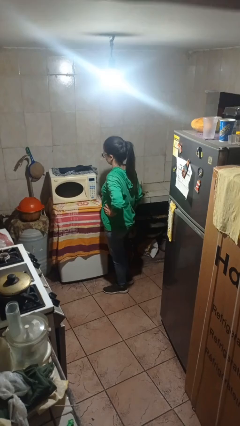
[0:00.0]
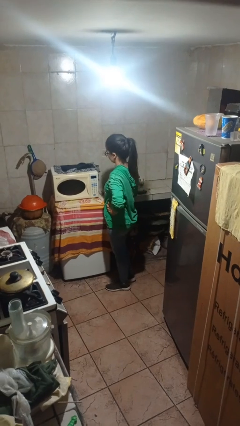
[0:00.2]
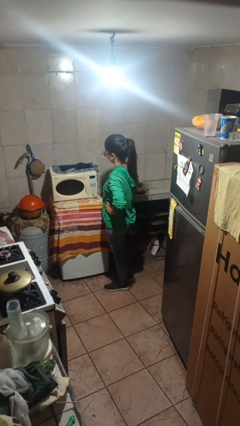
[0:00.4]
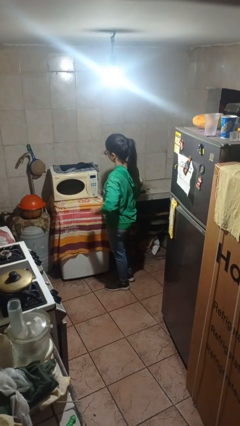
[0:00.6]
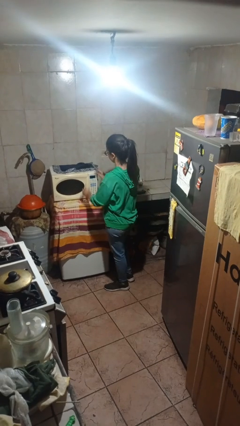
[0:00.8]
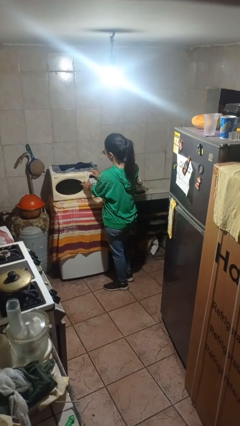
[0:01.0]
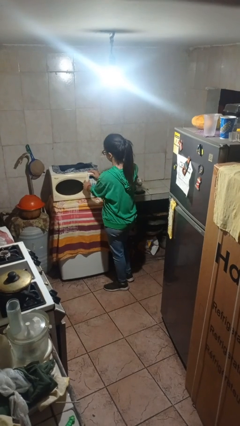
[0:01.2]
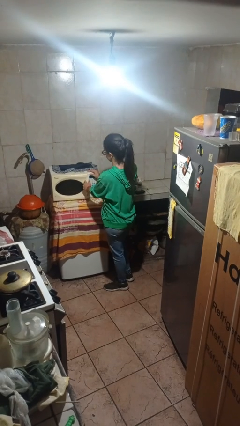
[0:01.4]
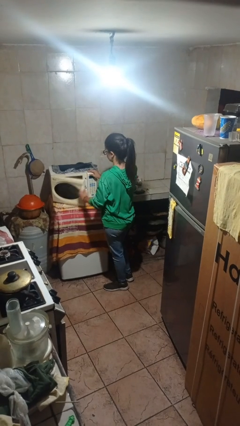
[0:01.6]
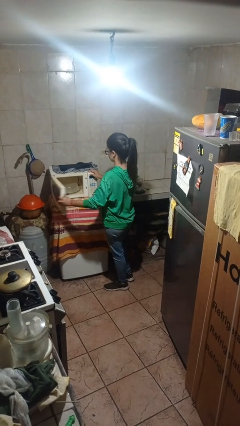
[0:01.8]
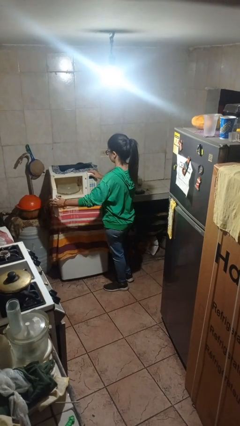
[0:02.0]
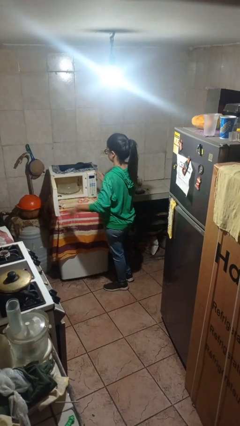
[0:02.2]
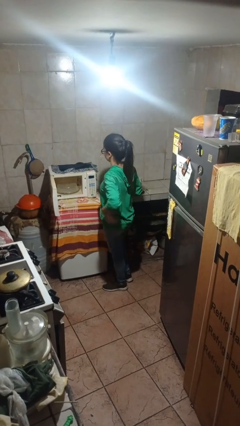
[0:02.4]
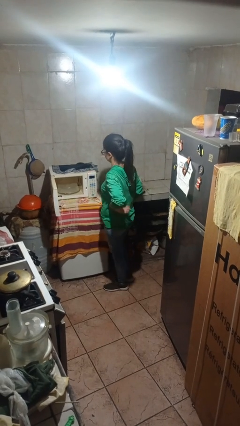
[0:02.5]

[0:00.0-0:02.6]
person opens microwave

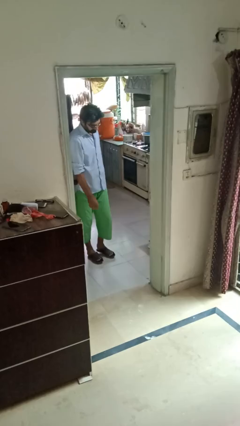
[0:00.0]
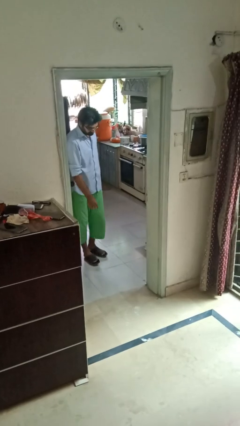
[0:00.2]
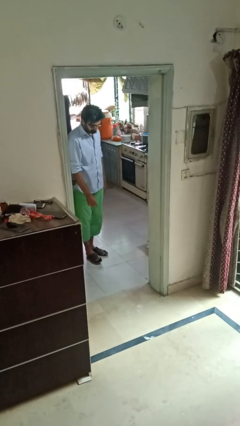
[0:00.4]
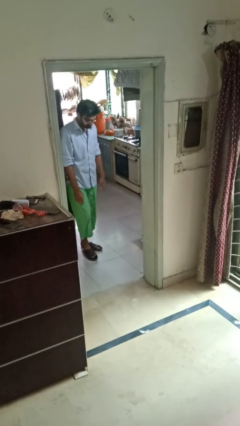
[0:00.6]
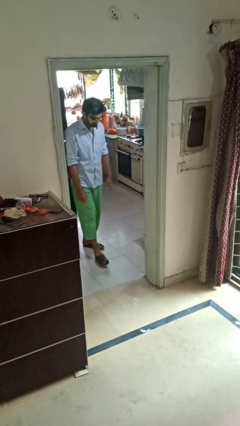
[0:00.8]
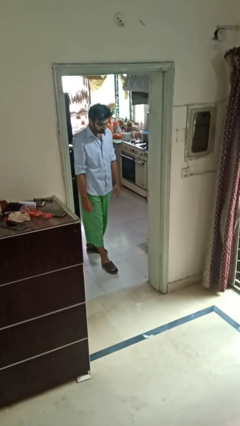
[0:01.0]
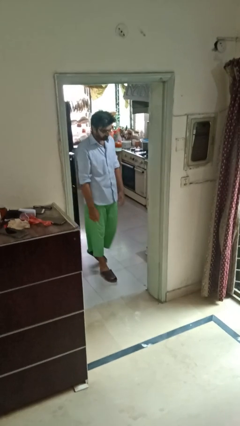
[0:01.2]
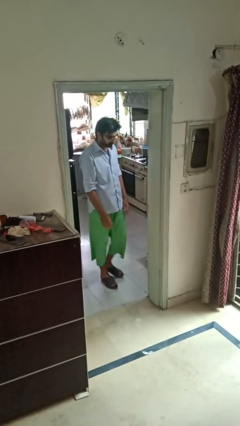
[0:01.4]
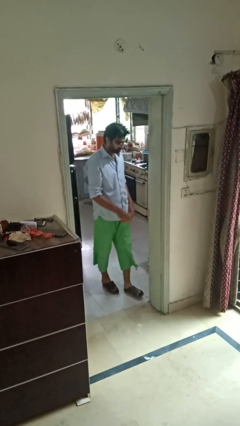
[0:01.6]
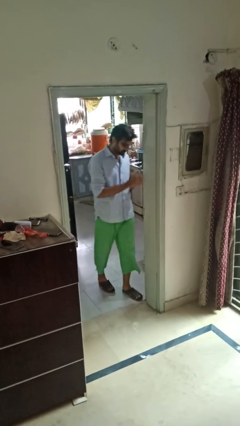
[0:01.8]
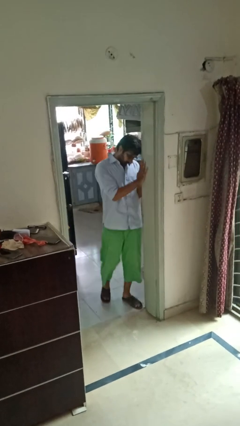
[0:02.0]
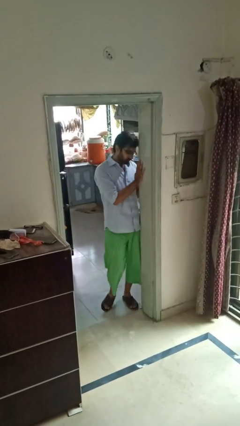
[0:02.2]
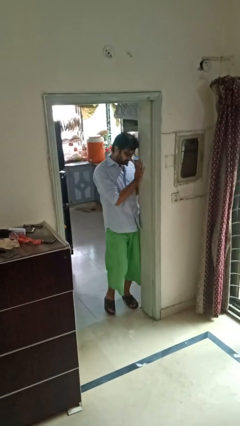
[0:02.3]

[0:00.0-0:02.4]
person bumps into wall

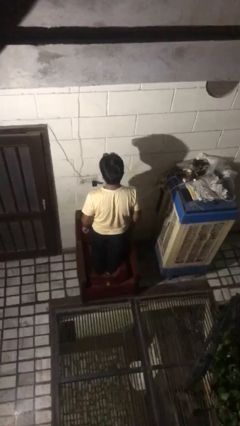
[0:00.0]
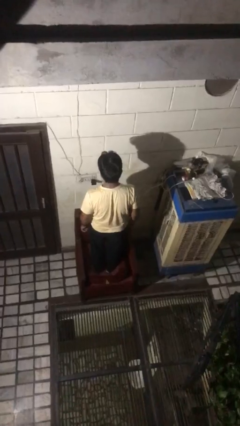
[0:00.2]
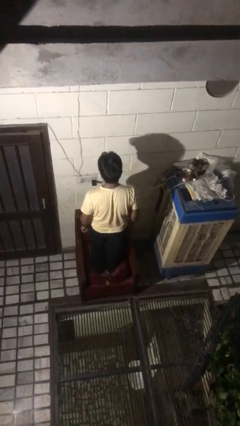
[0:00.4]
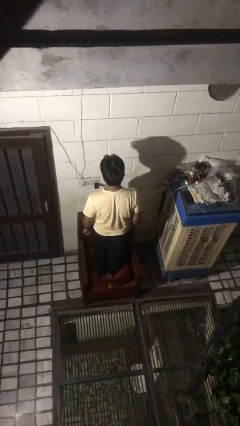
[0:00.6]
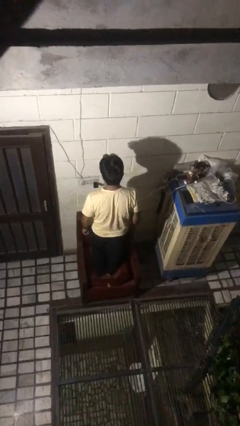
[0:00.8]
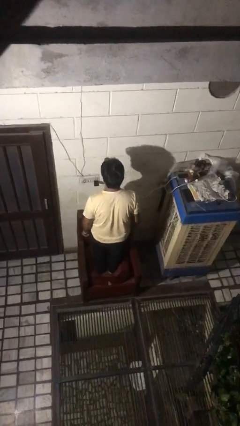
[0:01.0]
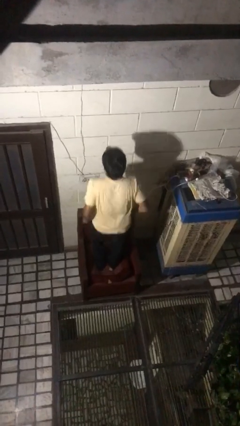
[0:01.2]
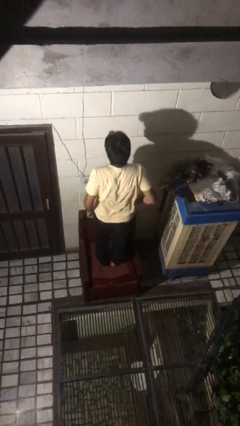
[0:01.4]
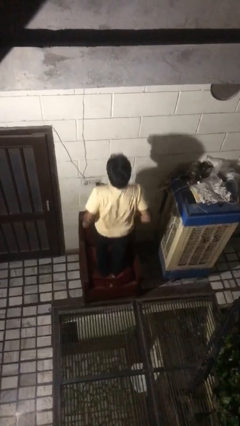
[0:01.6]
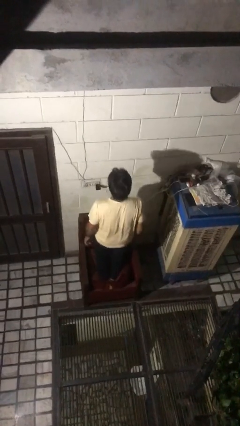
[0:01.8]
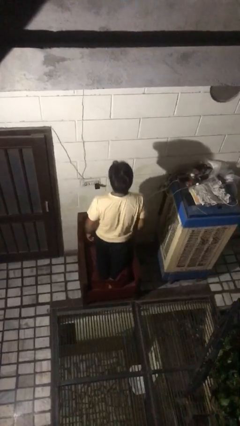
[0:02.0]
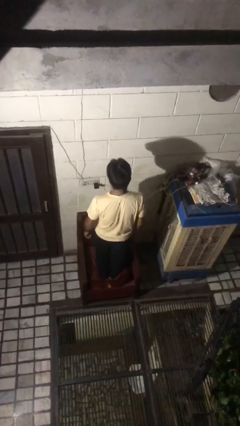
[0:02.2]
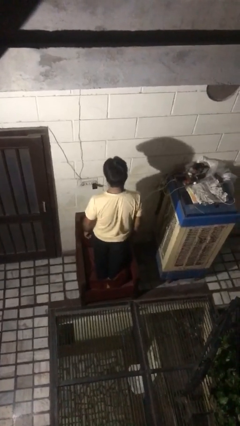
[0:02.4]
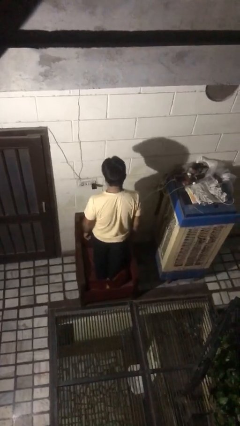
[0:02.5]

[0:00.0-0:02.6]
person jumps on couch

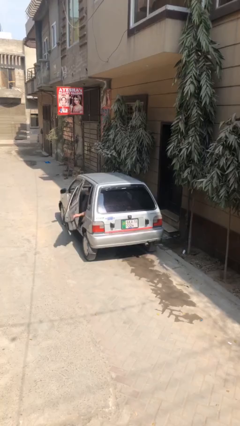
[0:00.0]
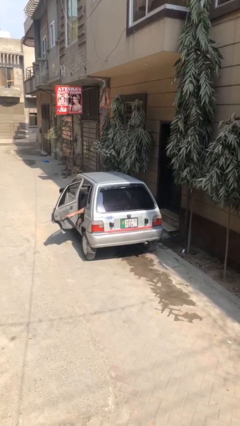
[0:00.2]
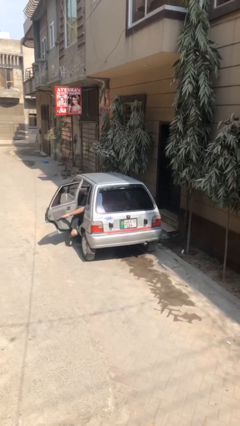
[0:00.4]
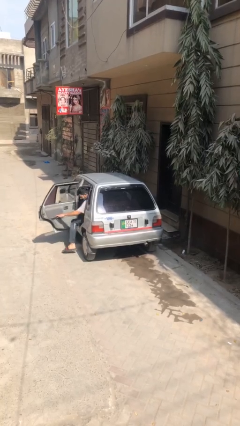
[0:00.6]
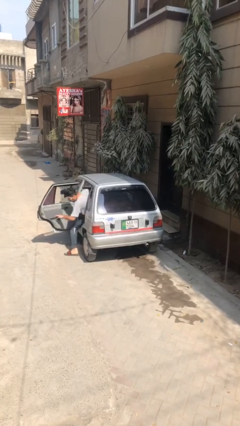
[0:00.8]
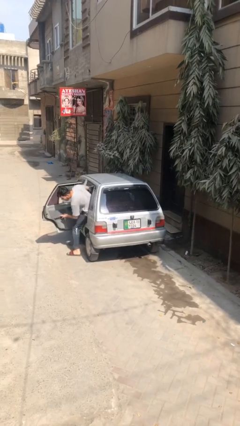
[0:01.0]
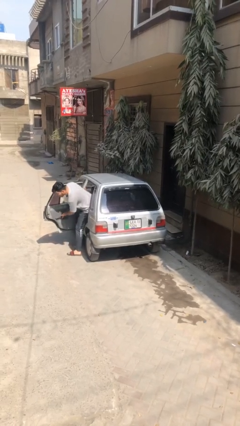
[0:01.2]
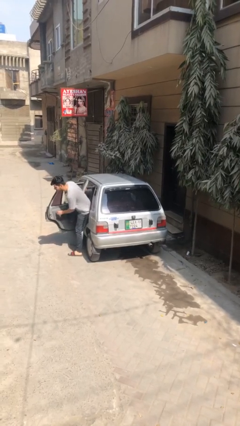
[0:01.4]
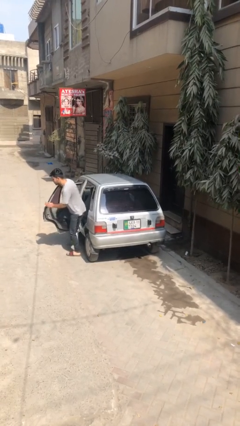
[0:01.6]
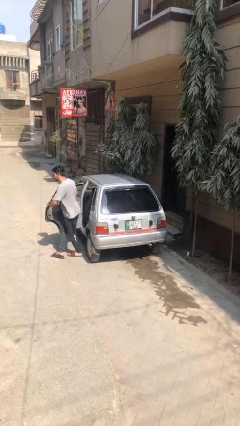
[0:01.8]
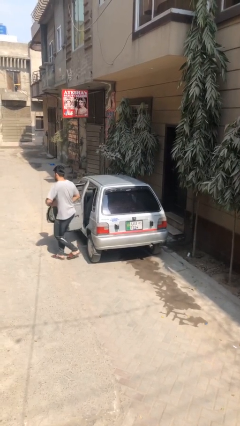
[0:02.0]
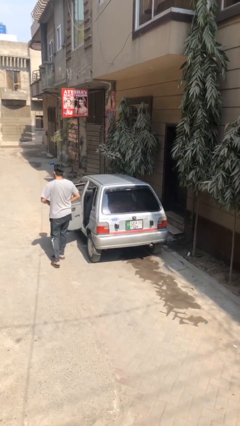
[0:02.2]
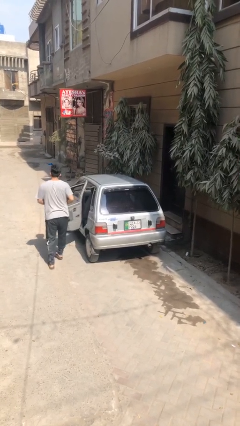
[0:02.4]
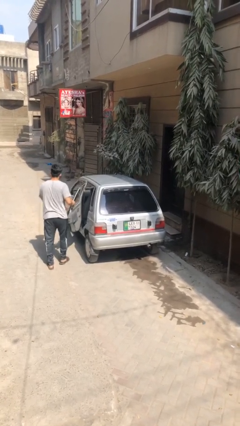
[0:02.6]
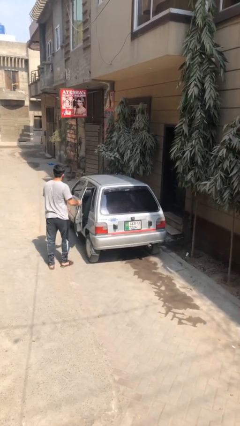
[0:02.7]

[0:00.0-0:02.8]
car drops off person

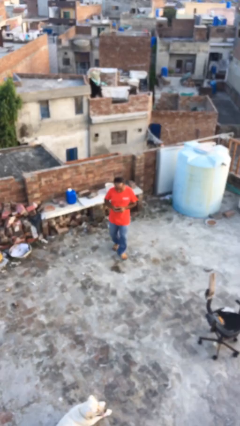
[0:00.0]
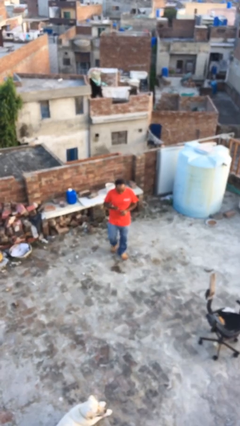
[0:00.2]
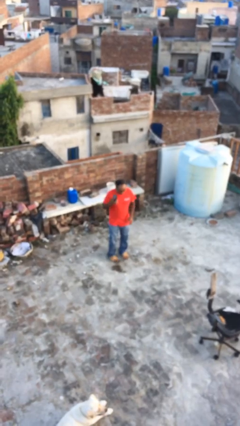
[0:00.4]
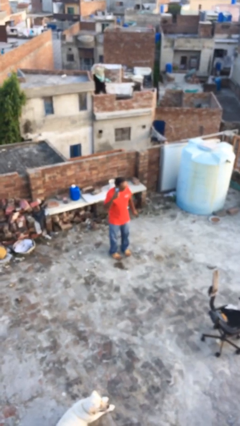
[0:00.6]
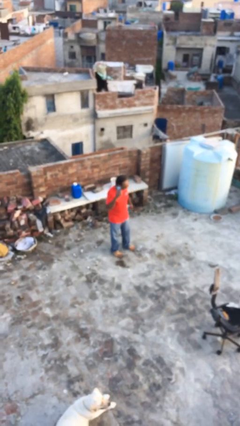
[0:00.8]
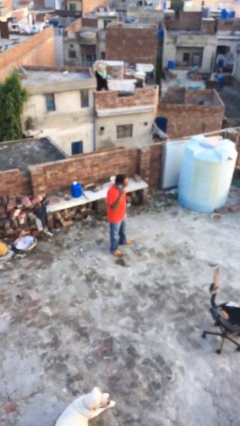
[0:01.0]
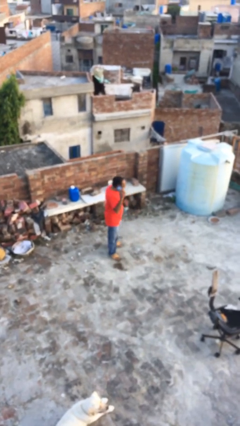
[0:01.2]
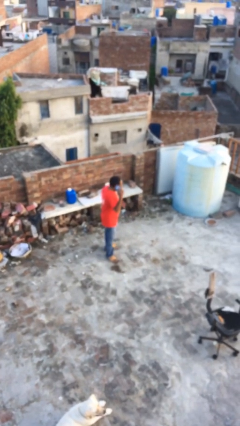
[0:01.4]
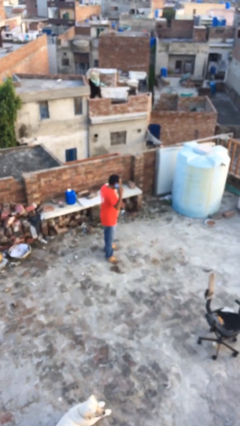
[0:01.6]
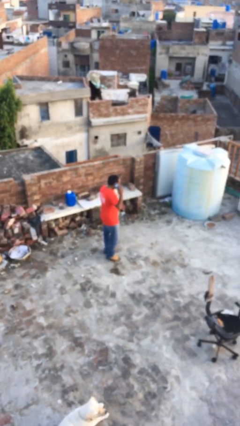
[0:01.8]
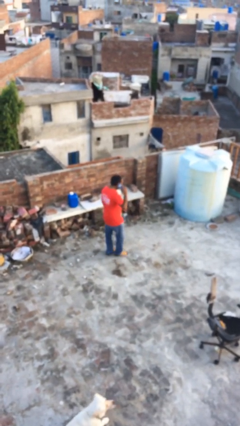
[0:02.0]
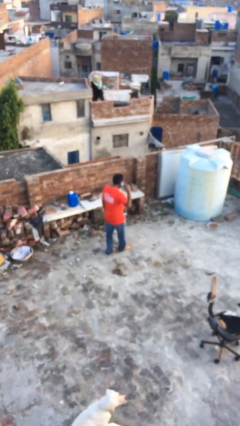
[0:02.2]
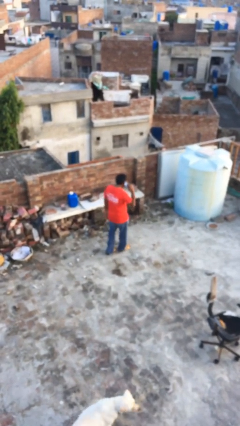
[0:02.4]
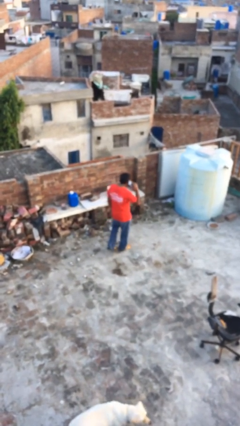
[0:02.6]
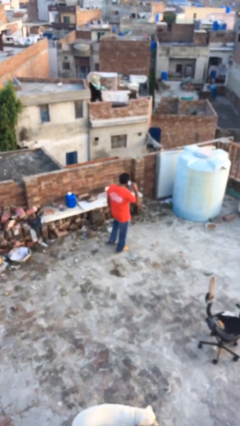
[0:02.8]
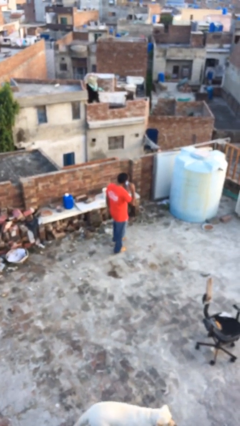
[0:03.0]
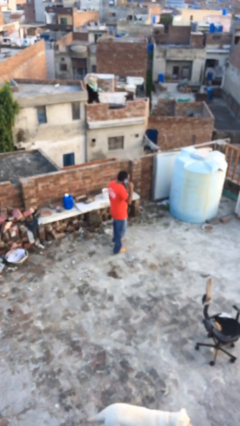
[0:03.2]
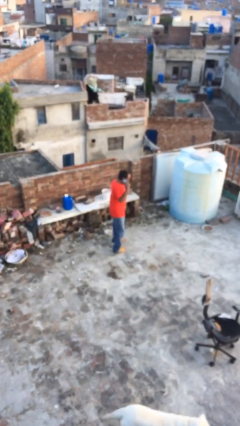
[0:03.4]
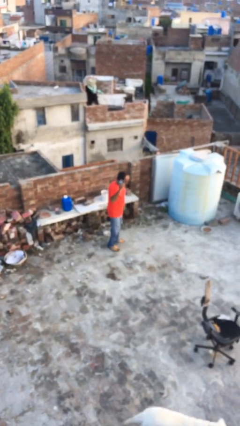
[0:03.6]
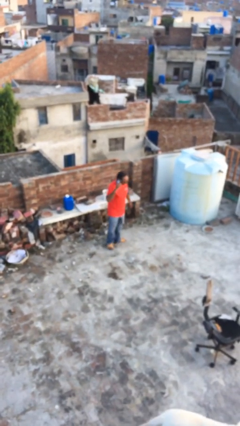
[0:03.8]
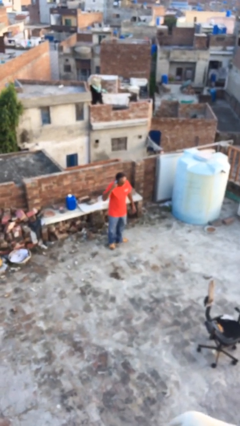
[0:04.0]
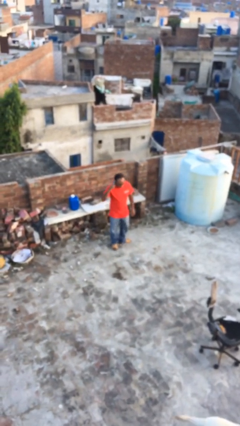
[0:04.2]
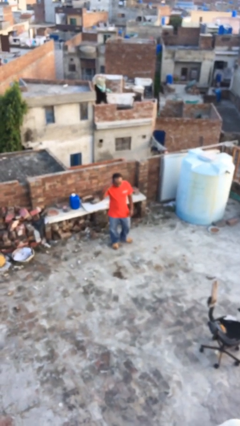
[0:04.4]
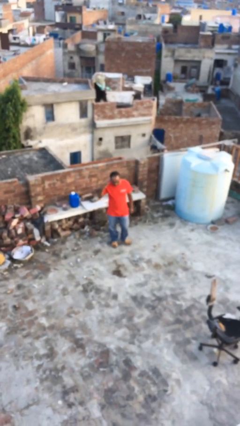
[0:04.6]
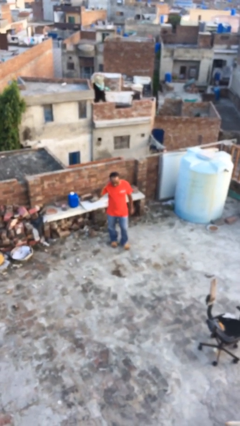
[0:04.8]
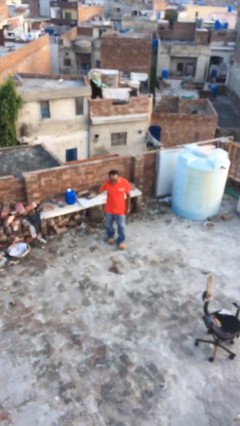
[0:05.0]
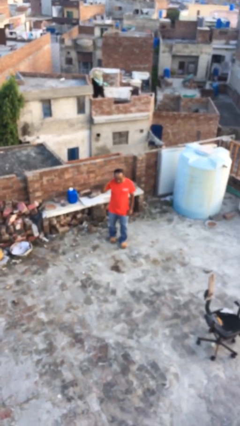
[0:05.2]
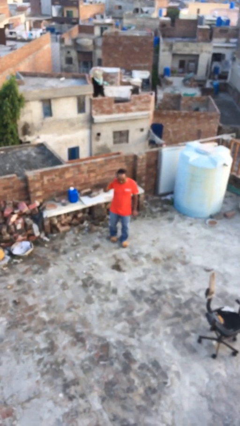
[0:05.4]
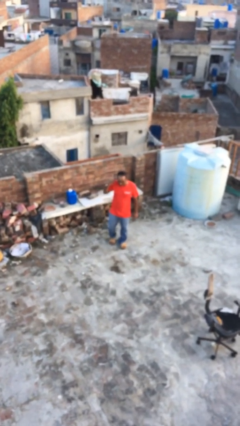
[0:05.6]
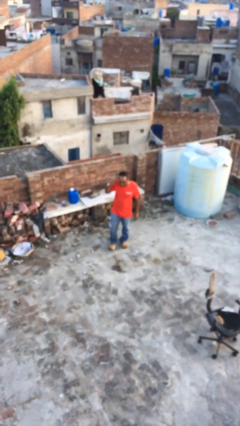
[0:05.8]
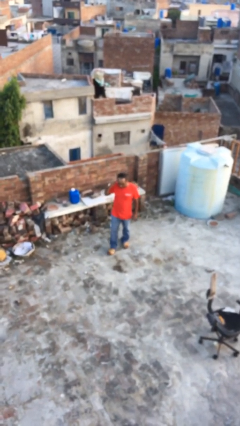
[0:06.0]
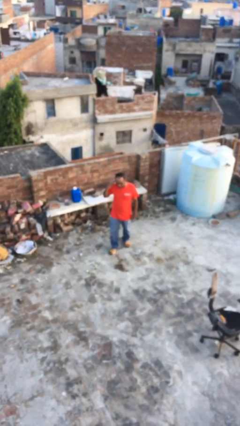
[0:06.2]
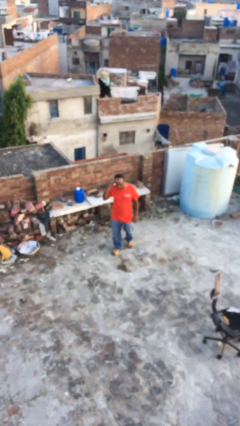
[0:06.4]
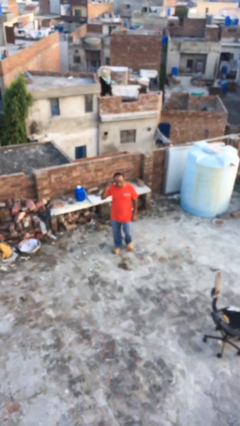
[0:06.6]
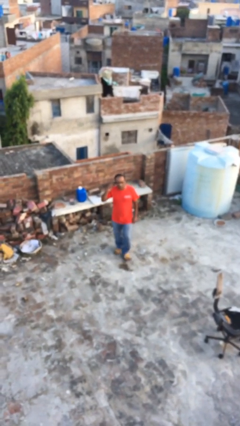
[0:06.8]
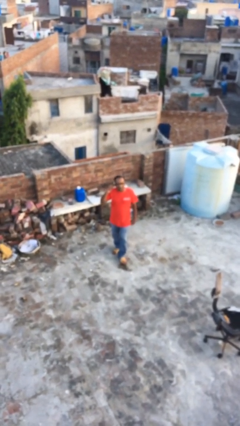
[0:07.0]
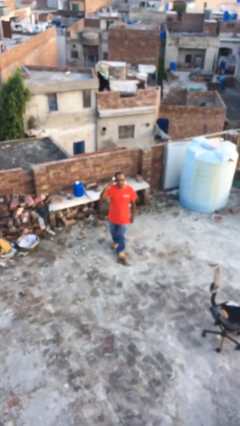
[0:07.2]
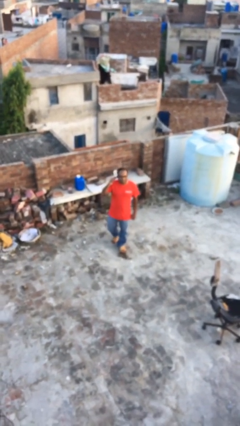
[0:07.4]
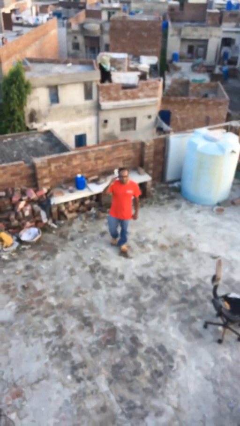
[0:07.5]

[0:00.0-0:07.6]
person talks on phone
